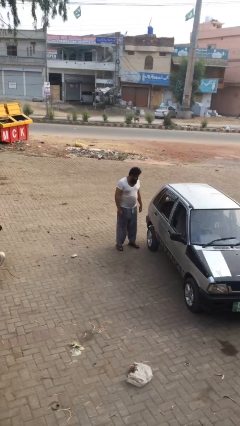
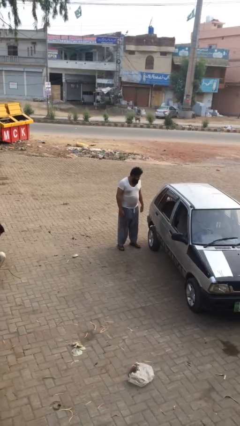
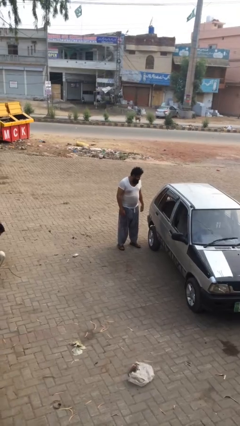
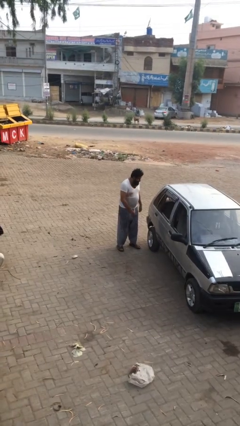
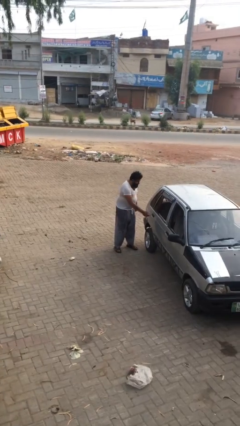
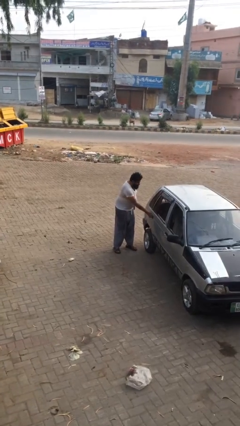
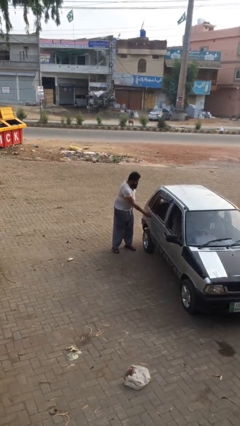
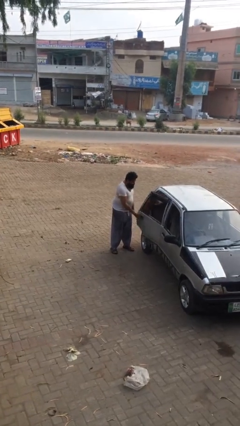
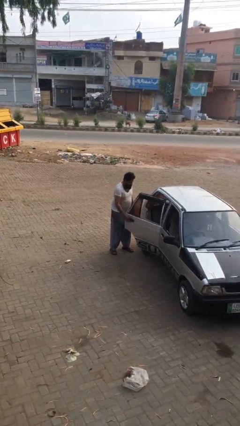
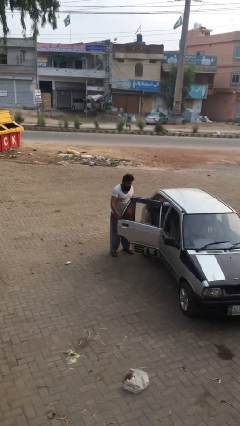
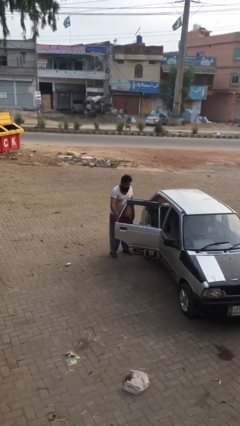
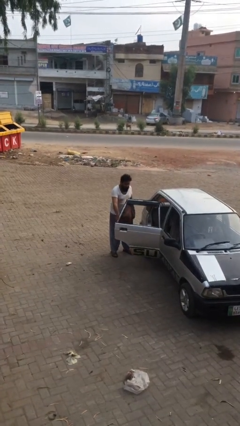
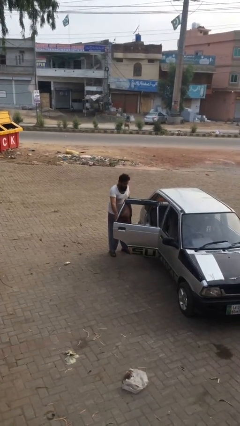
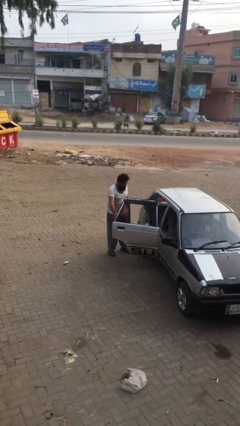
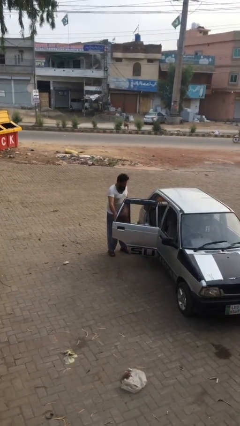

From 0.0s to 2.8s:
person opens car door

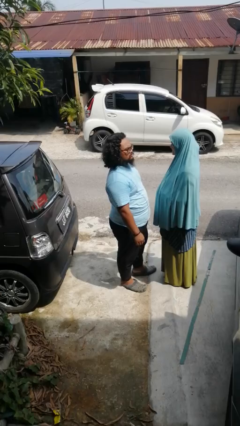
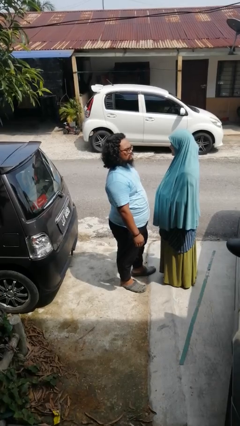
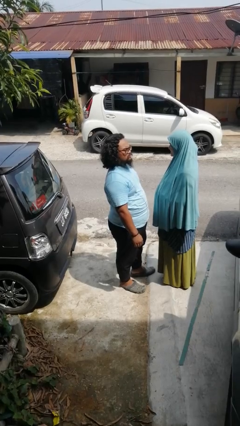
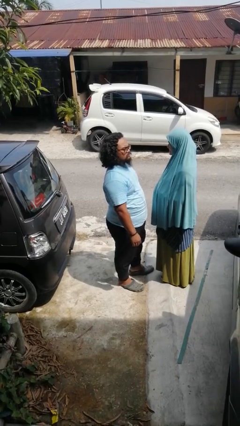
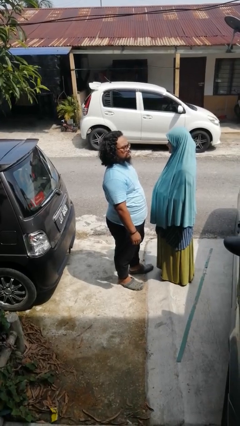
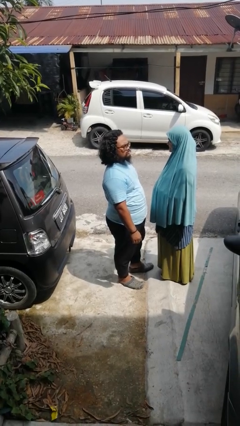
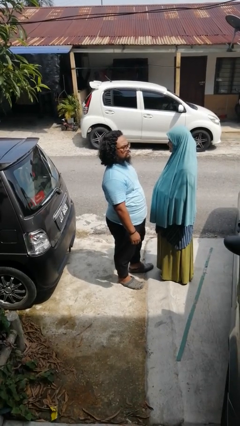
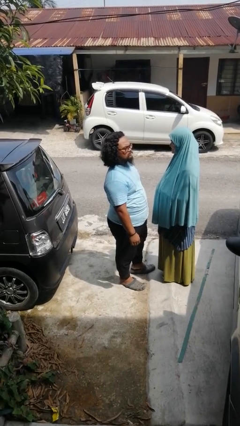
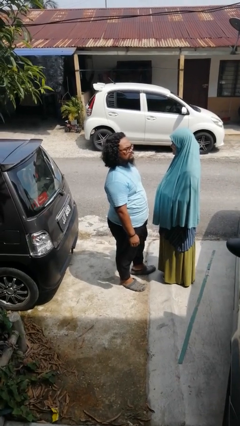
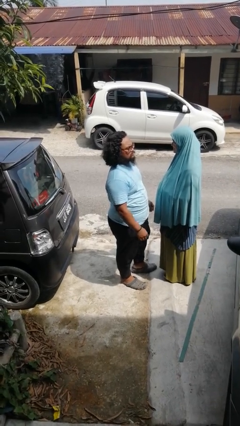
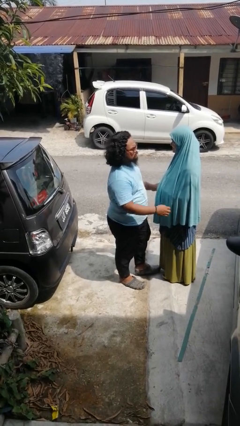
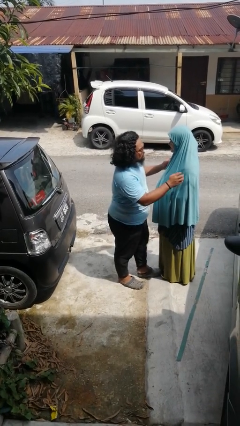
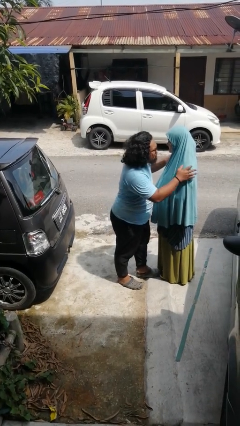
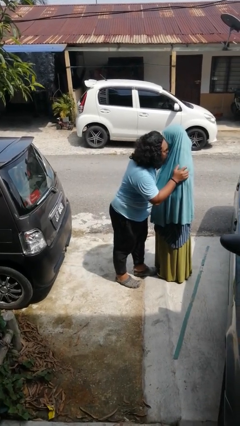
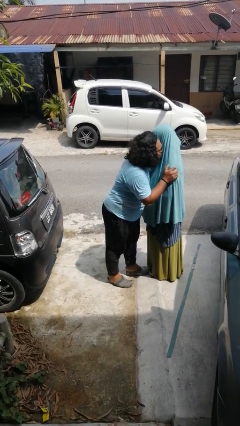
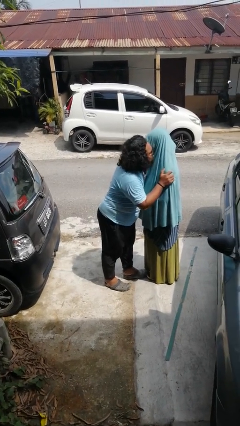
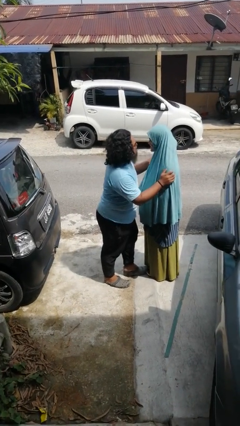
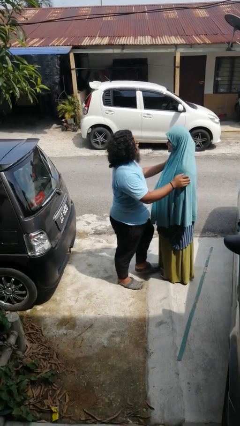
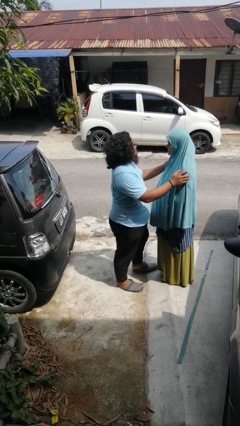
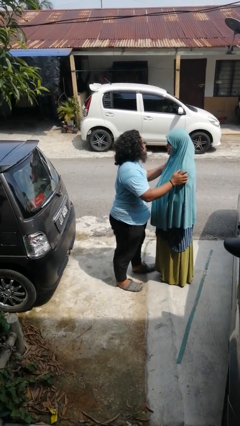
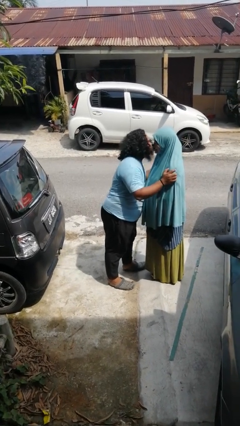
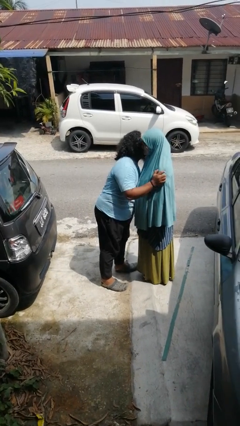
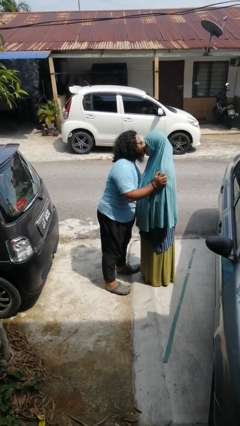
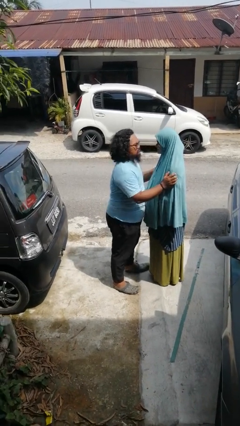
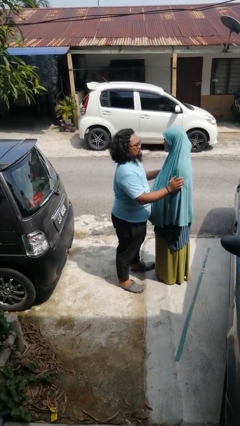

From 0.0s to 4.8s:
person kisses cheek of person

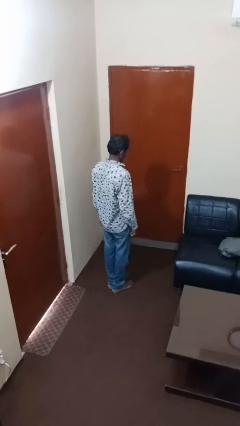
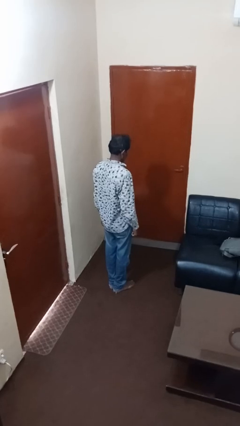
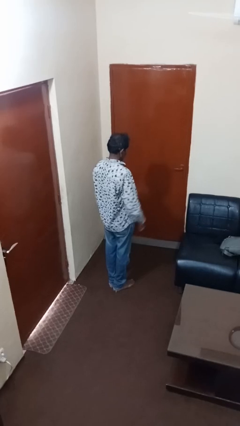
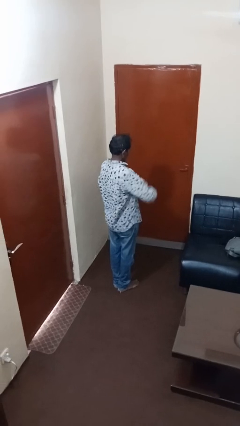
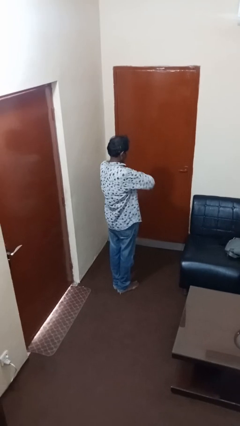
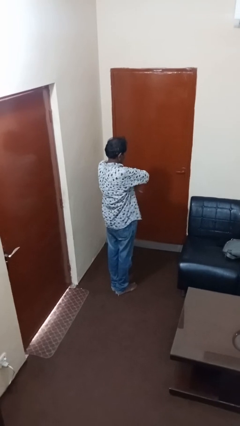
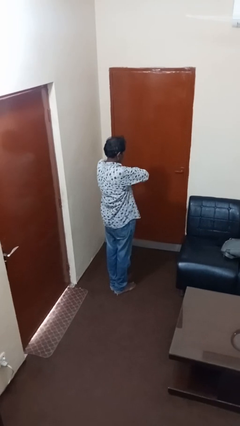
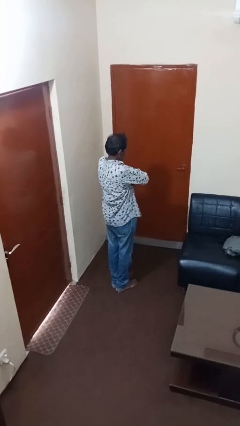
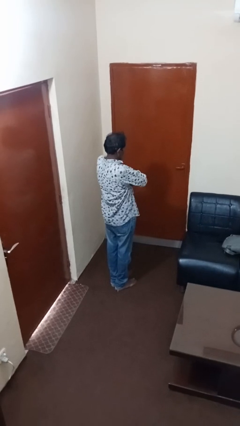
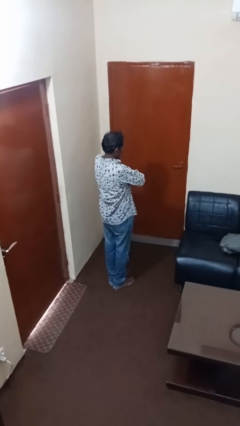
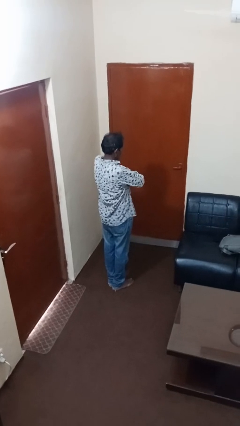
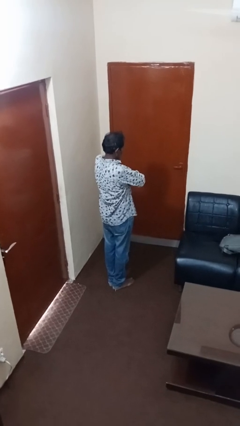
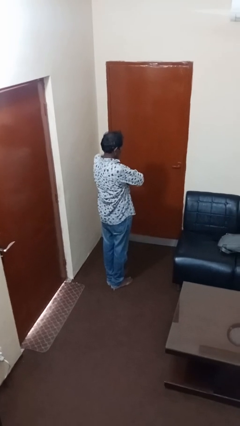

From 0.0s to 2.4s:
person crosses arms

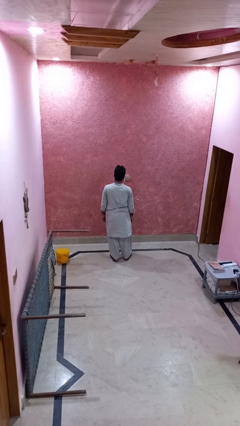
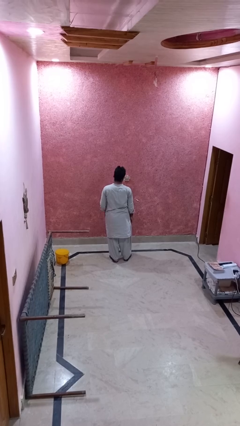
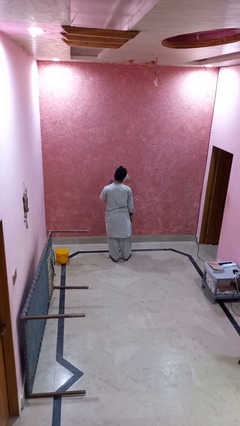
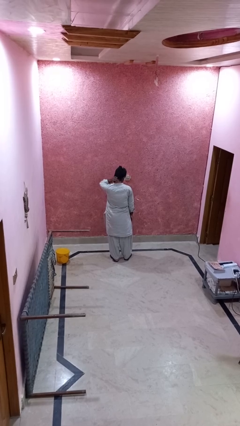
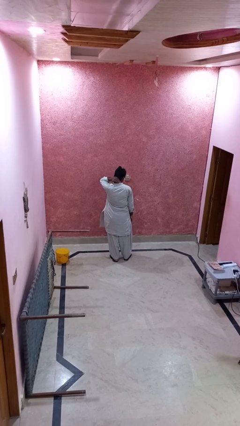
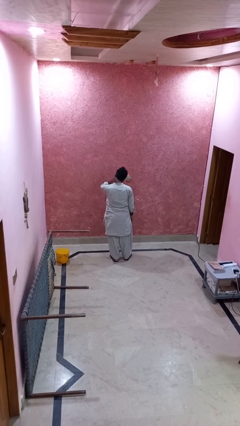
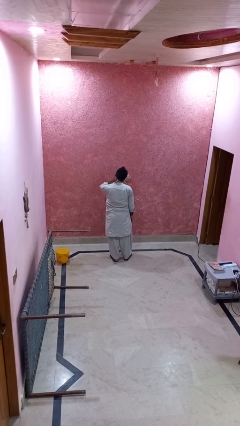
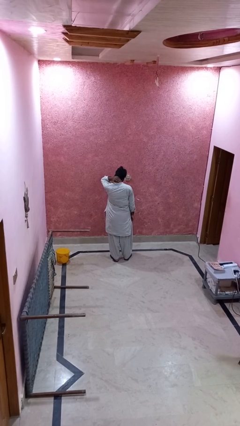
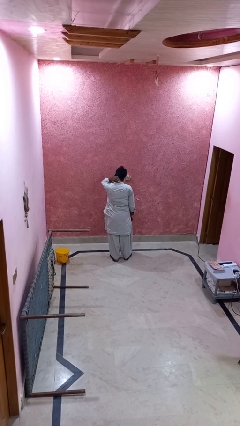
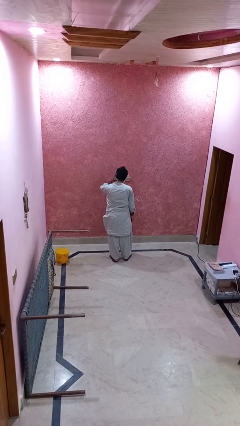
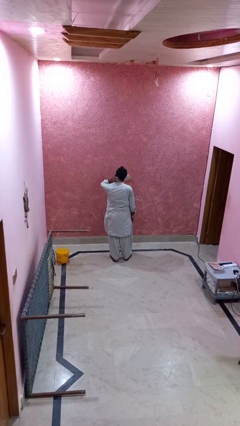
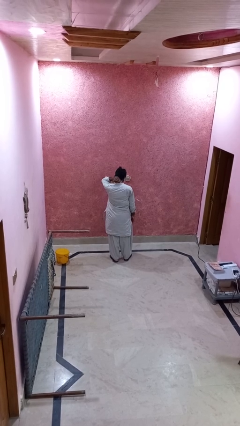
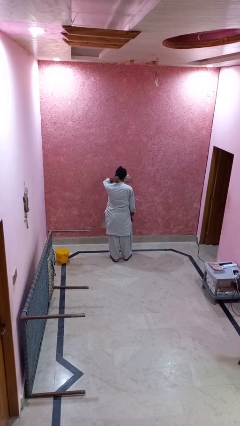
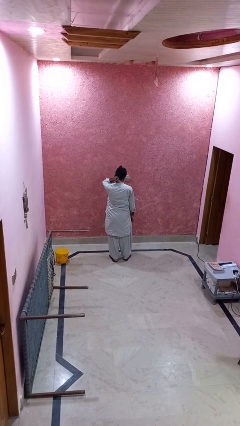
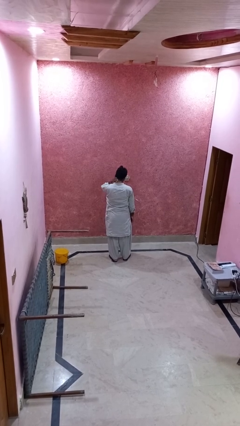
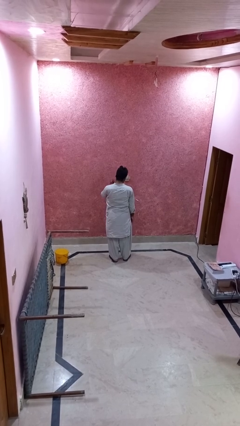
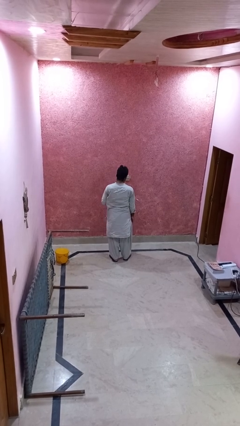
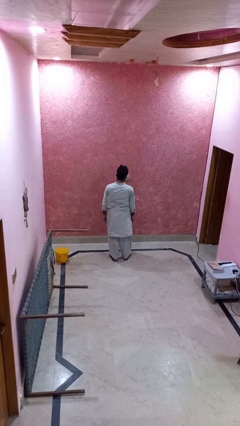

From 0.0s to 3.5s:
person rubs neck

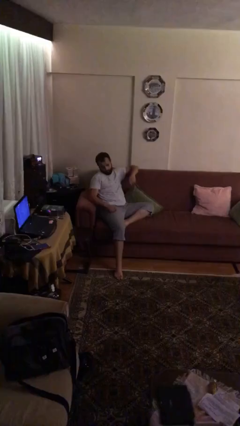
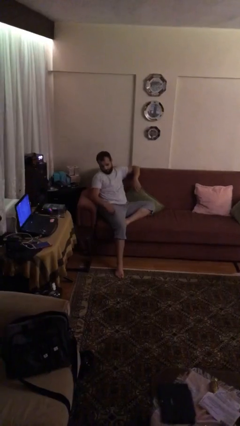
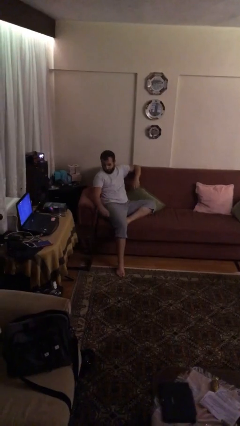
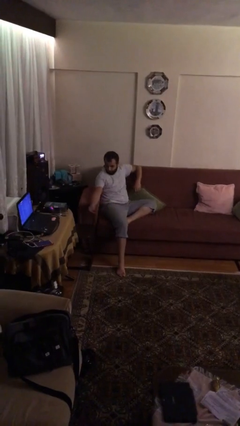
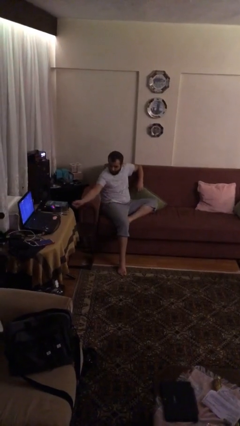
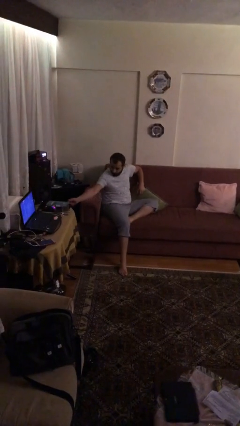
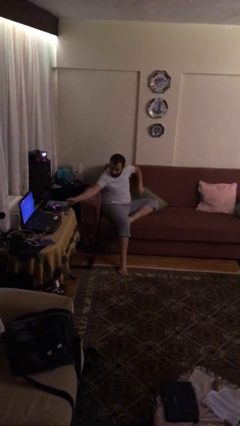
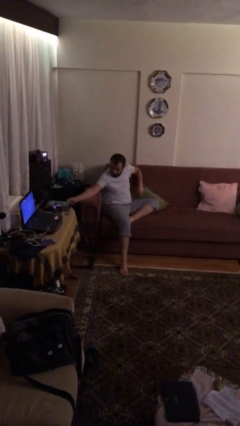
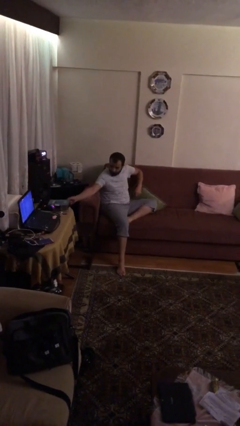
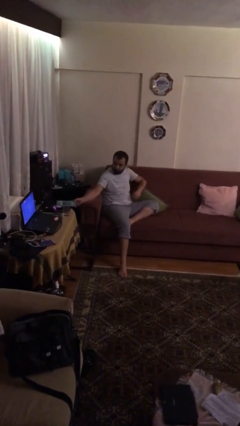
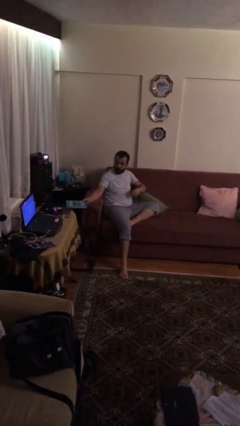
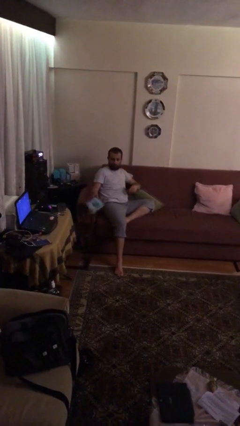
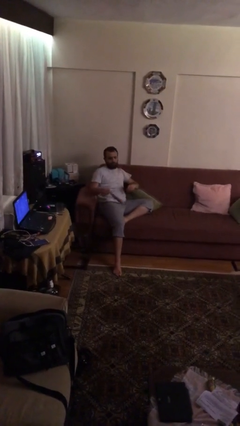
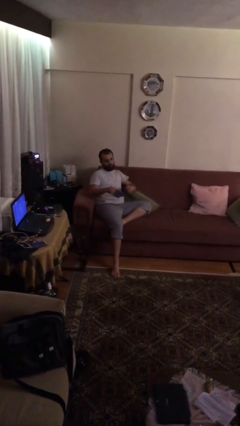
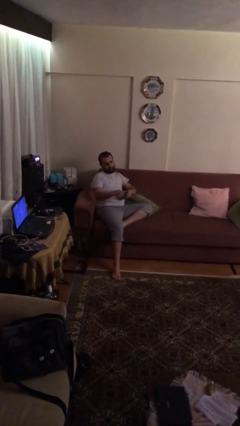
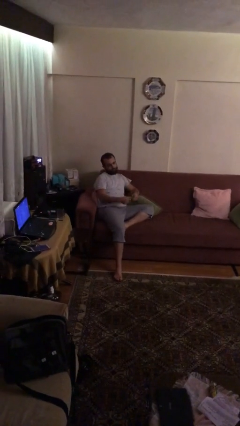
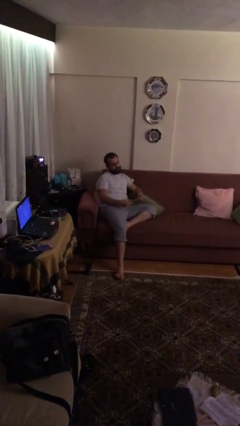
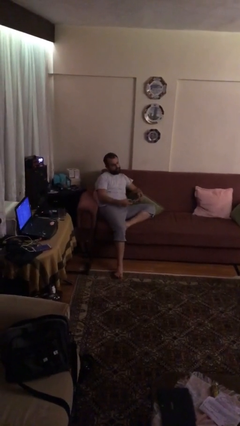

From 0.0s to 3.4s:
person picks up object from table

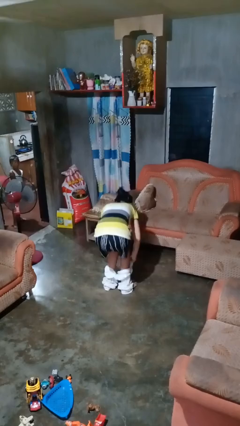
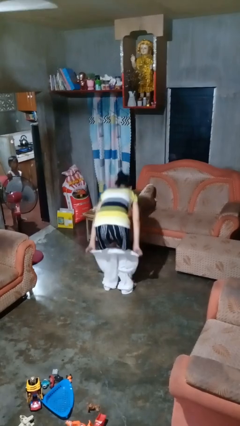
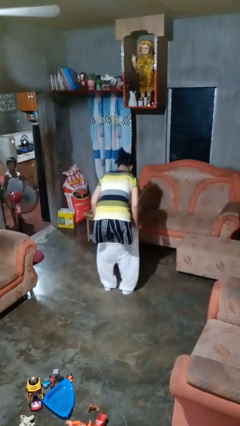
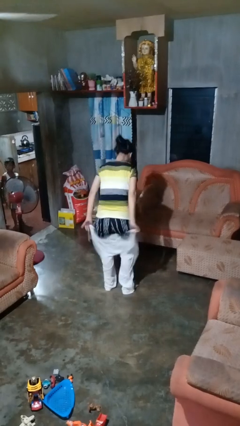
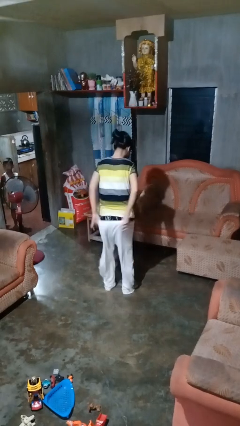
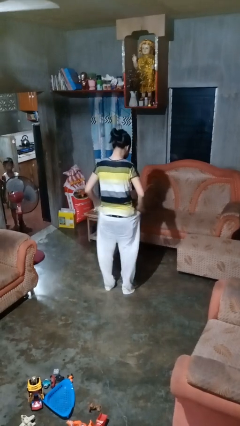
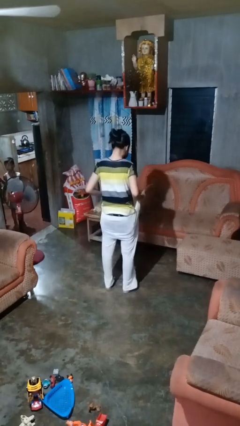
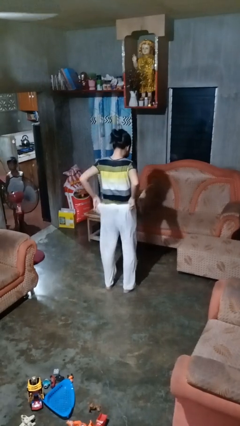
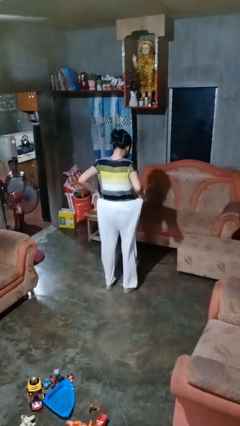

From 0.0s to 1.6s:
person puts on pants
